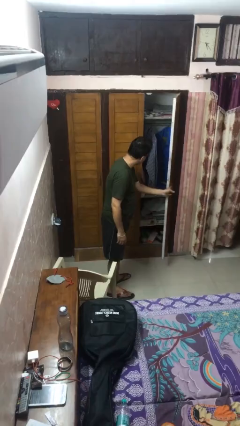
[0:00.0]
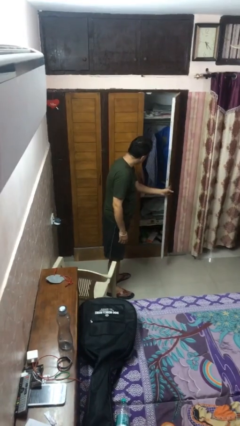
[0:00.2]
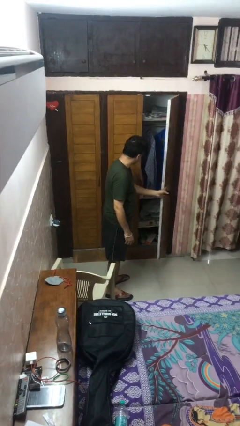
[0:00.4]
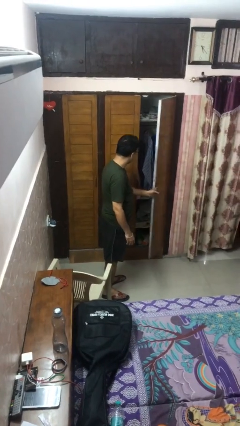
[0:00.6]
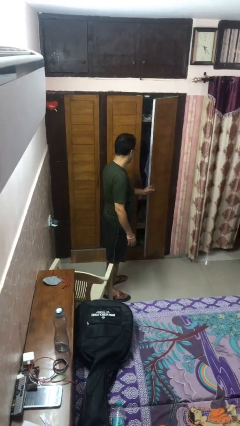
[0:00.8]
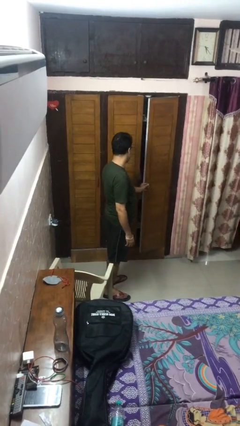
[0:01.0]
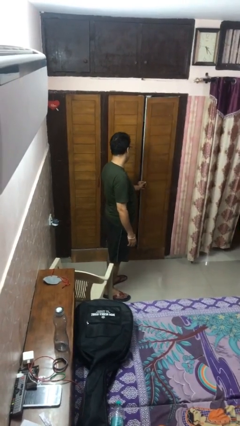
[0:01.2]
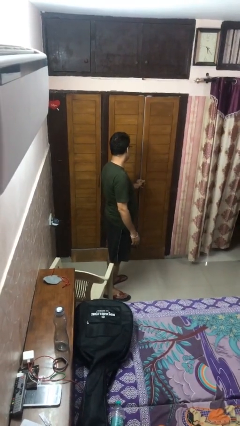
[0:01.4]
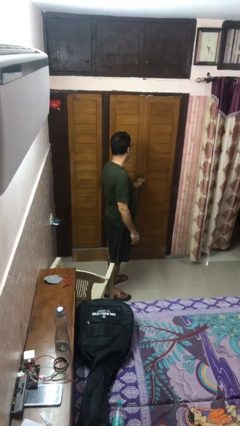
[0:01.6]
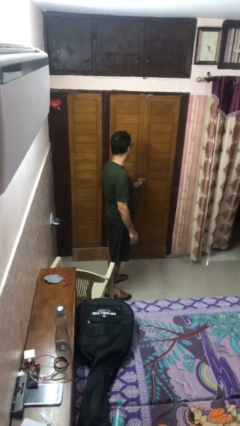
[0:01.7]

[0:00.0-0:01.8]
person closes closet door

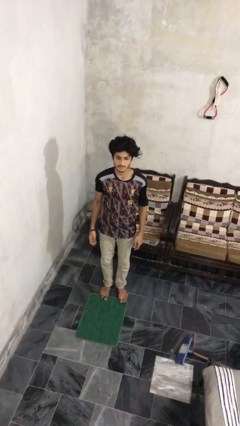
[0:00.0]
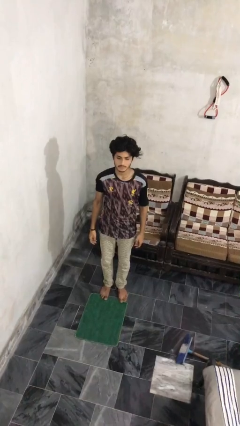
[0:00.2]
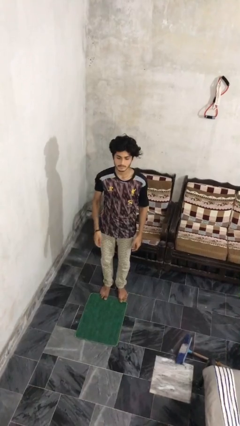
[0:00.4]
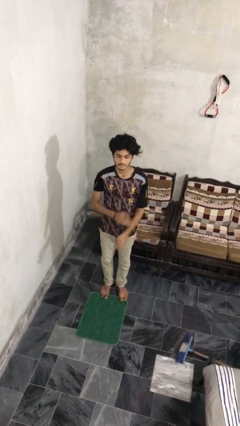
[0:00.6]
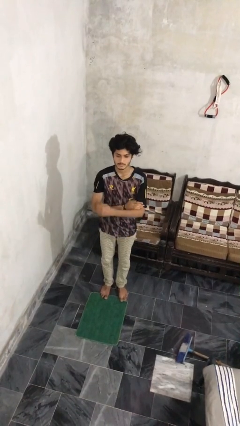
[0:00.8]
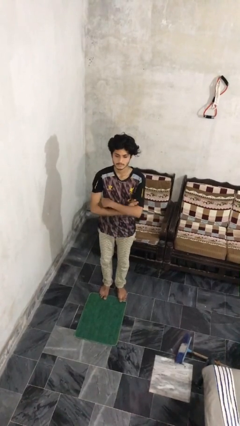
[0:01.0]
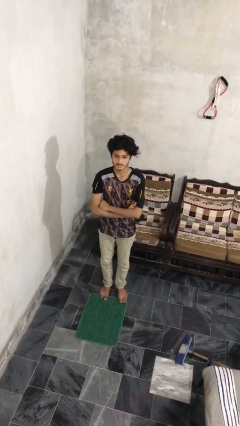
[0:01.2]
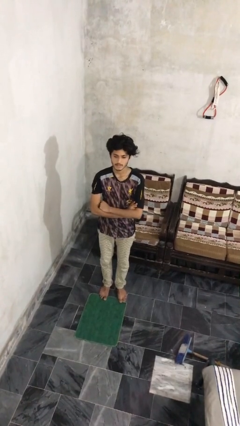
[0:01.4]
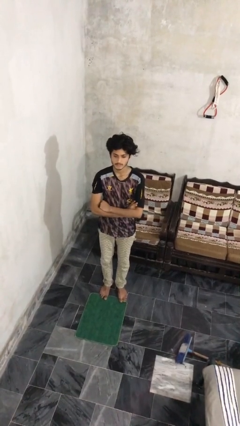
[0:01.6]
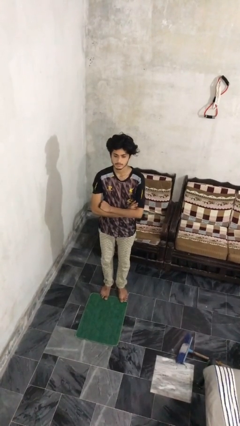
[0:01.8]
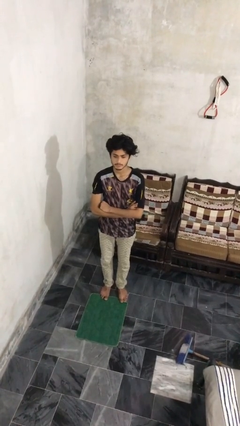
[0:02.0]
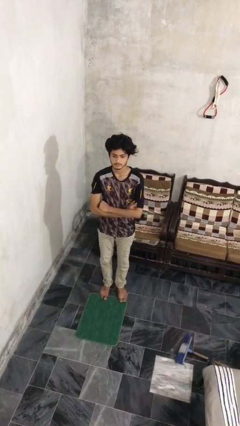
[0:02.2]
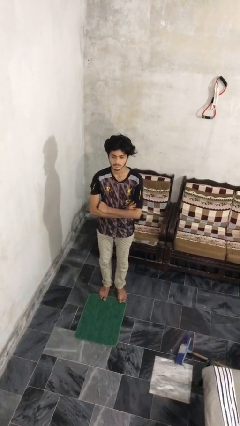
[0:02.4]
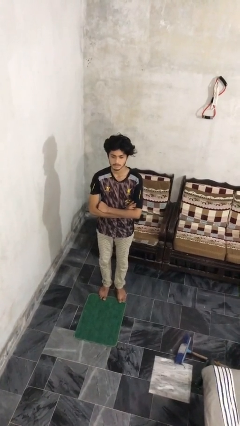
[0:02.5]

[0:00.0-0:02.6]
person crosses arms

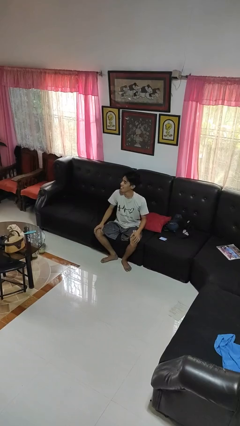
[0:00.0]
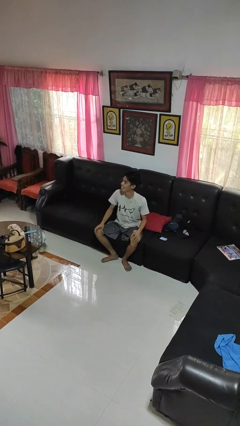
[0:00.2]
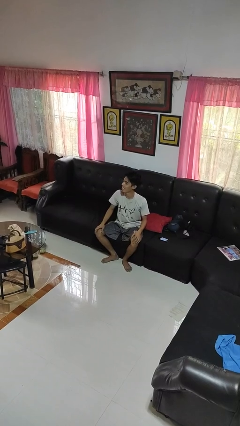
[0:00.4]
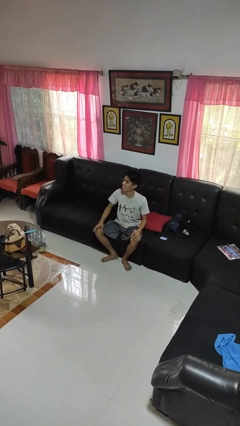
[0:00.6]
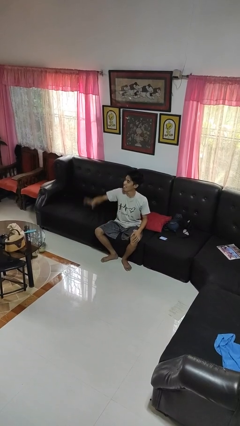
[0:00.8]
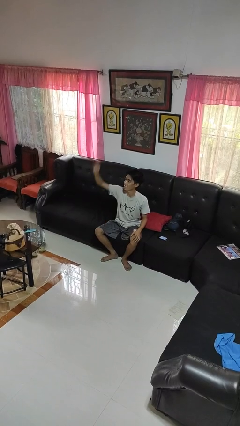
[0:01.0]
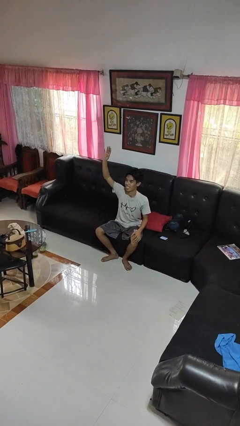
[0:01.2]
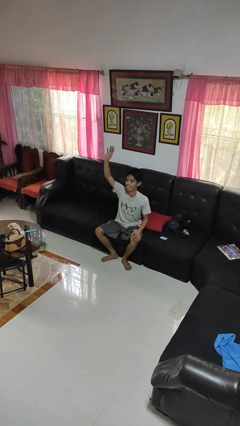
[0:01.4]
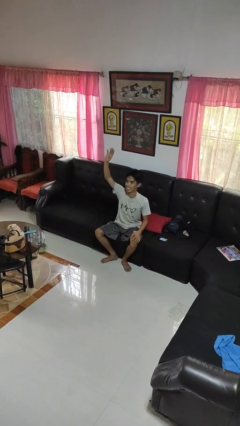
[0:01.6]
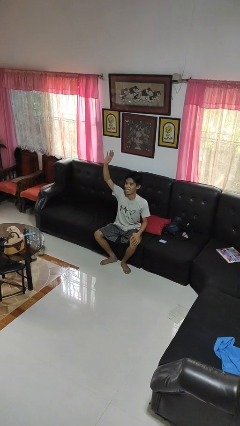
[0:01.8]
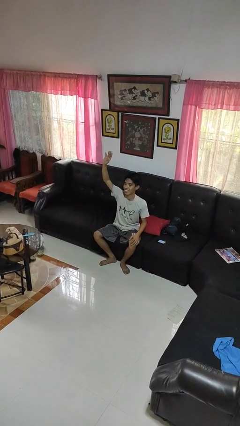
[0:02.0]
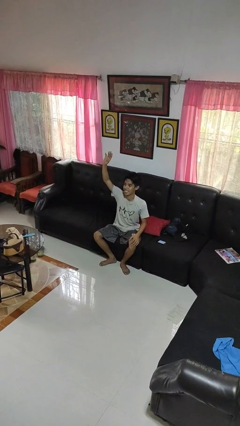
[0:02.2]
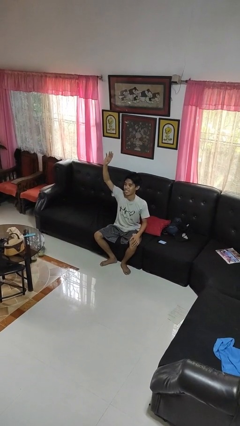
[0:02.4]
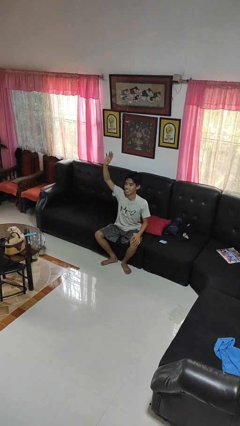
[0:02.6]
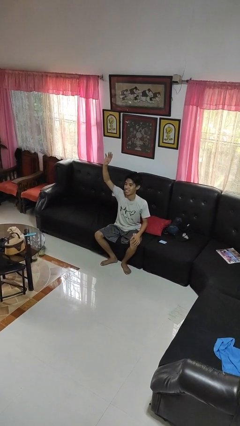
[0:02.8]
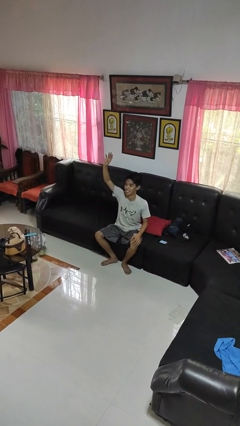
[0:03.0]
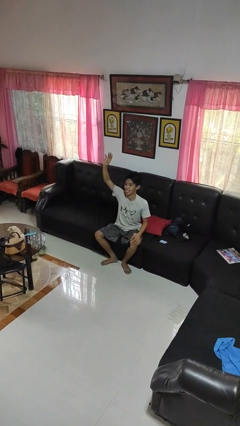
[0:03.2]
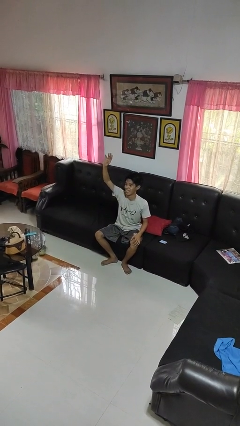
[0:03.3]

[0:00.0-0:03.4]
person gestures raise hand

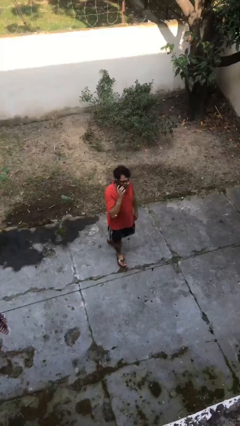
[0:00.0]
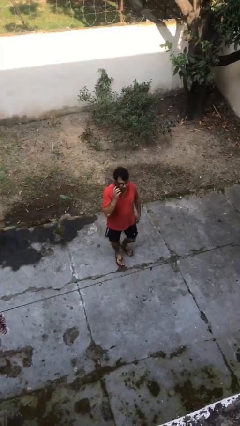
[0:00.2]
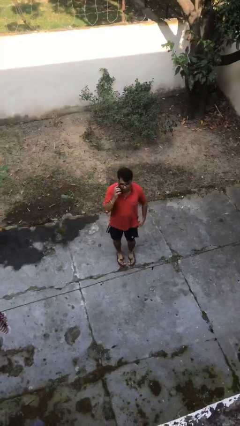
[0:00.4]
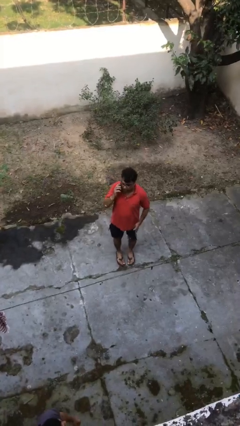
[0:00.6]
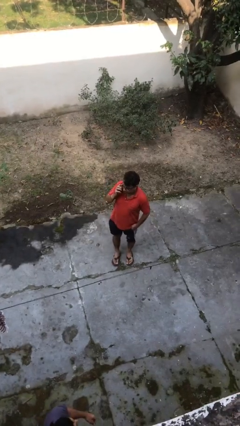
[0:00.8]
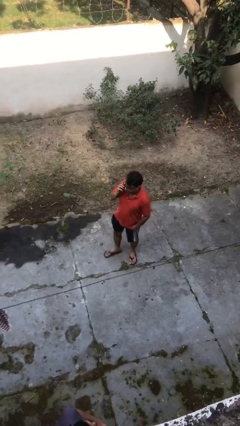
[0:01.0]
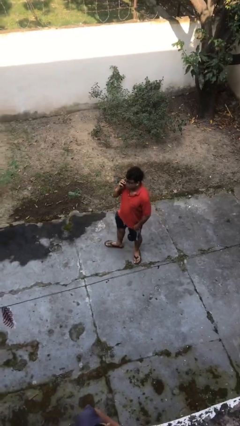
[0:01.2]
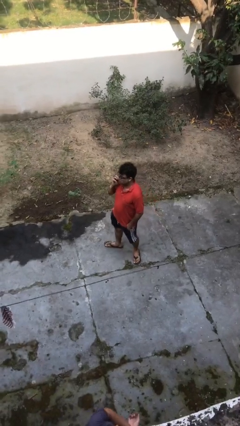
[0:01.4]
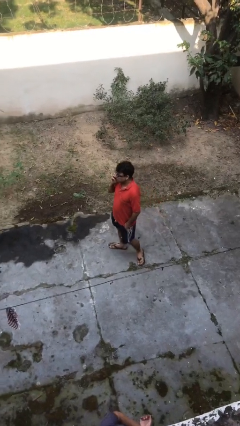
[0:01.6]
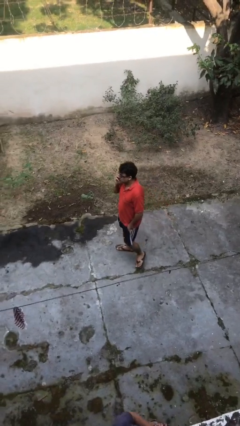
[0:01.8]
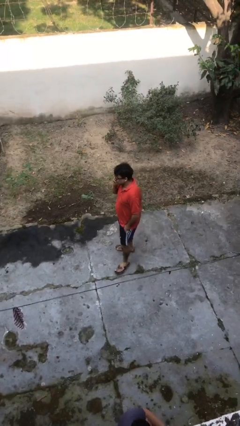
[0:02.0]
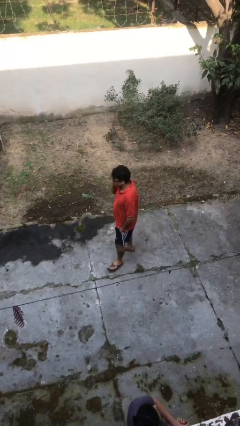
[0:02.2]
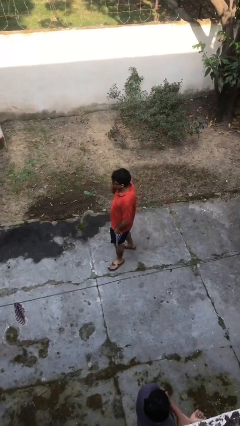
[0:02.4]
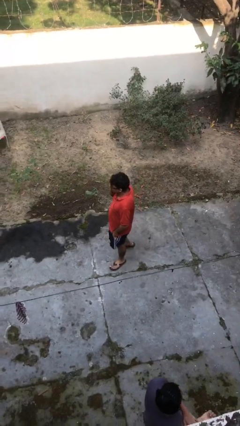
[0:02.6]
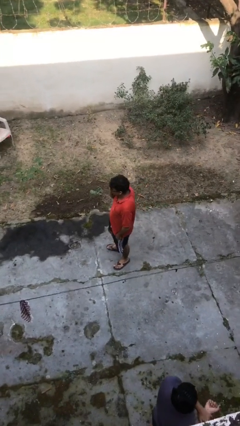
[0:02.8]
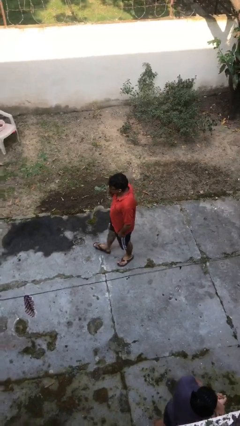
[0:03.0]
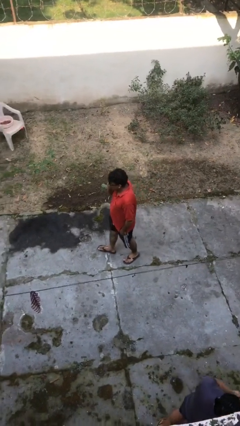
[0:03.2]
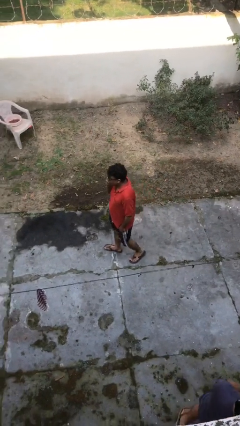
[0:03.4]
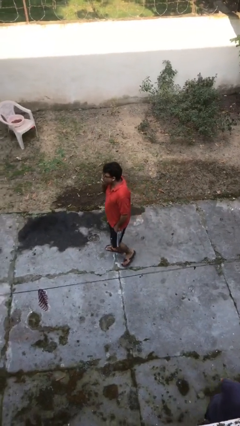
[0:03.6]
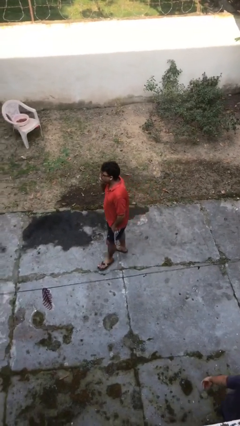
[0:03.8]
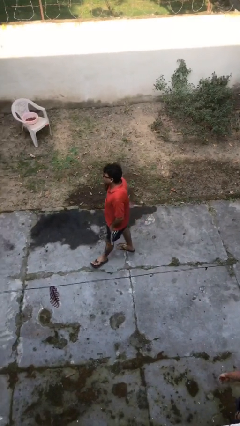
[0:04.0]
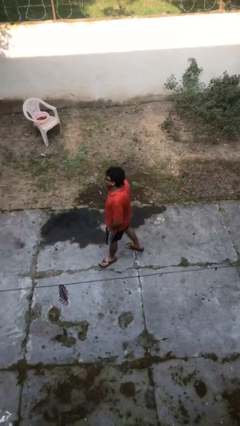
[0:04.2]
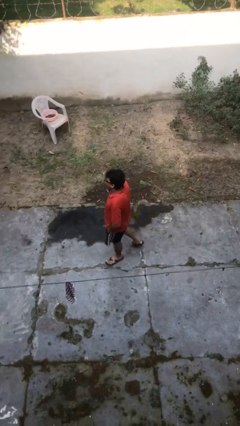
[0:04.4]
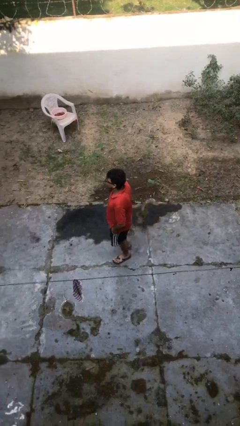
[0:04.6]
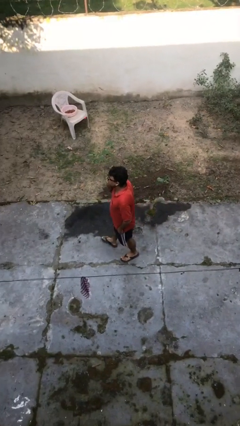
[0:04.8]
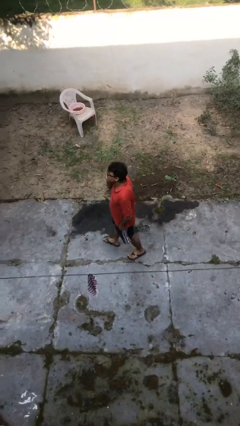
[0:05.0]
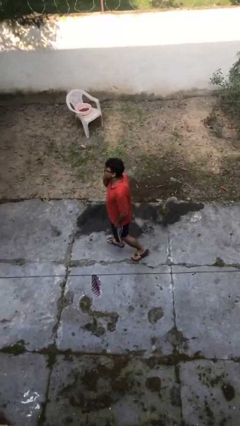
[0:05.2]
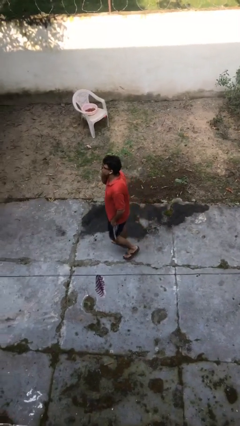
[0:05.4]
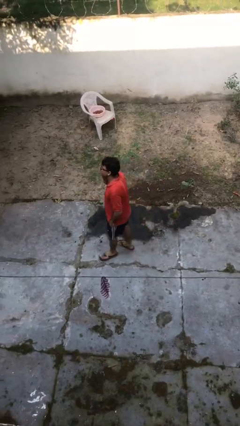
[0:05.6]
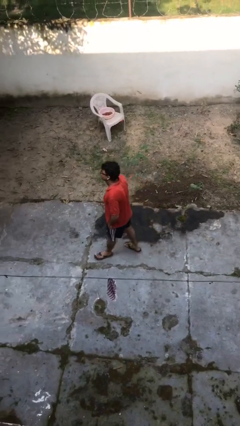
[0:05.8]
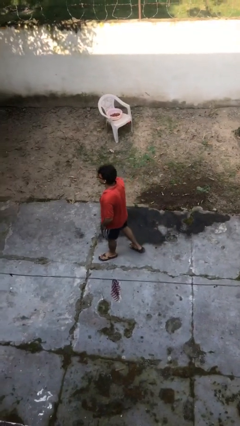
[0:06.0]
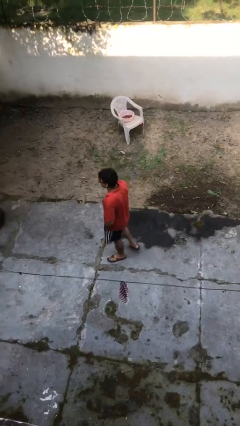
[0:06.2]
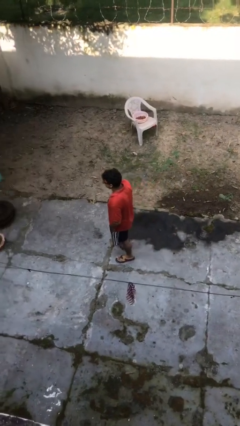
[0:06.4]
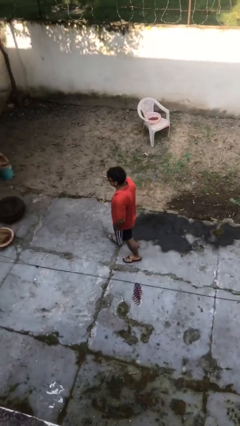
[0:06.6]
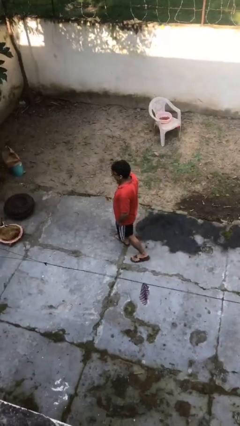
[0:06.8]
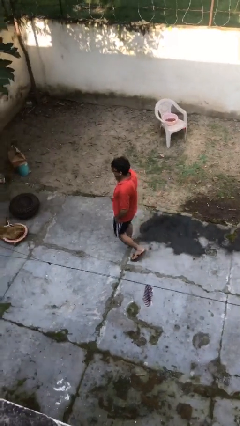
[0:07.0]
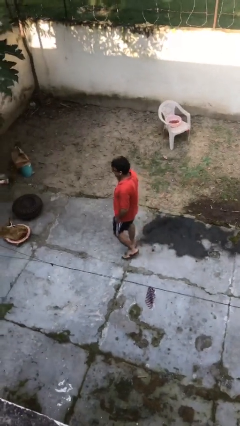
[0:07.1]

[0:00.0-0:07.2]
person talks on phone

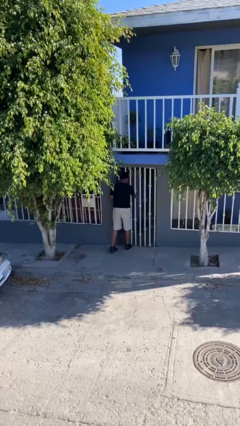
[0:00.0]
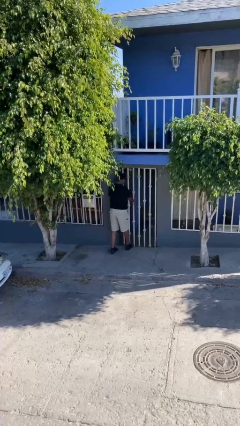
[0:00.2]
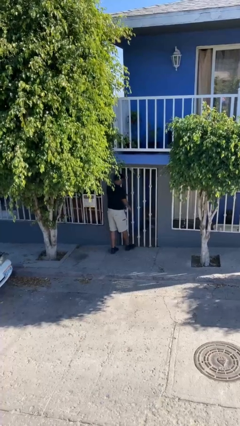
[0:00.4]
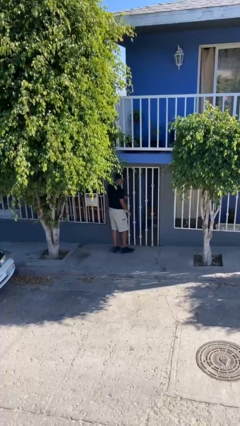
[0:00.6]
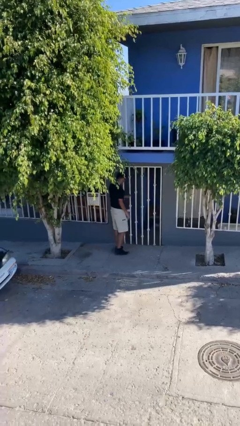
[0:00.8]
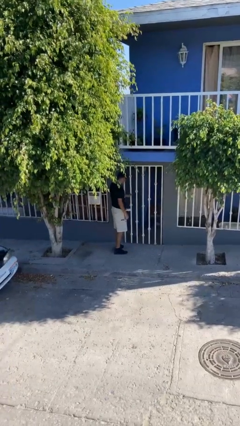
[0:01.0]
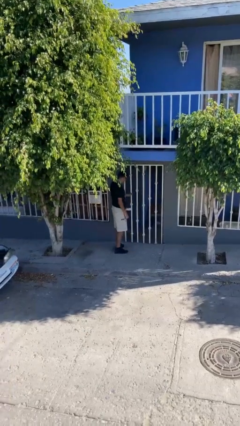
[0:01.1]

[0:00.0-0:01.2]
person closes facility door

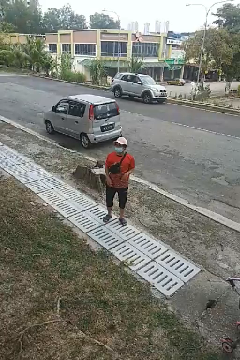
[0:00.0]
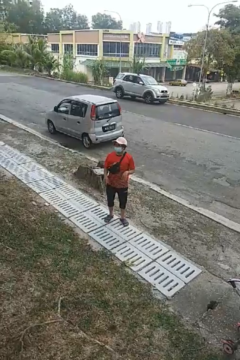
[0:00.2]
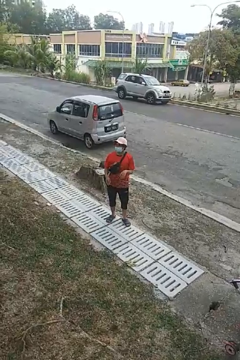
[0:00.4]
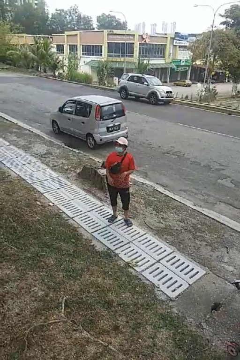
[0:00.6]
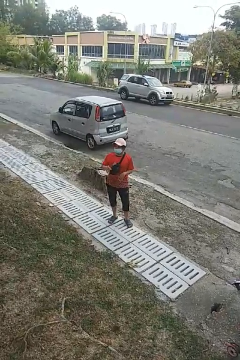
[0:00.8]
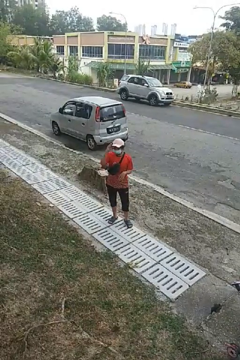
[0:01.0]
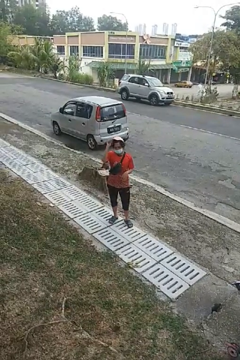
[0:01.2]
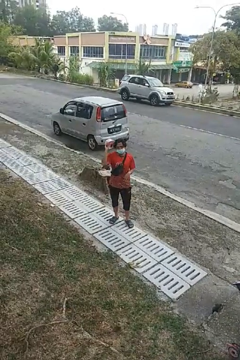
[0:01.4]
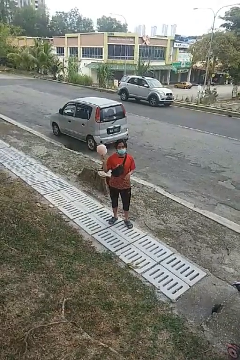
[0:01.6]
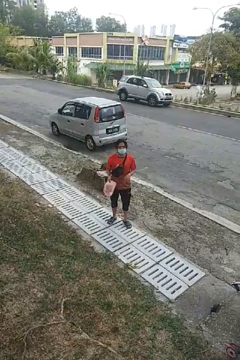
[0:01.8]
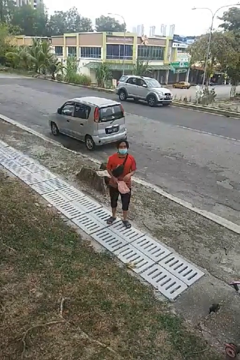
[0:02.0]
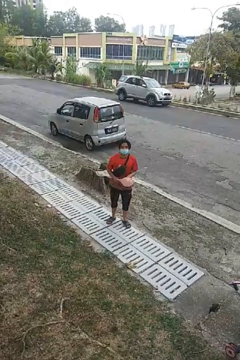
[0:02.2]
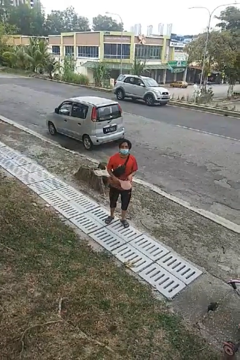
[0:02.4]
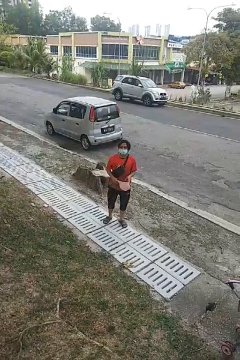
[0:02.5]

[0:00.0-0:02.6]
person takes off hat
